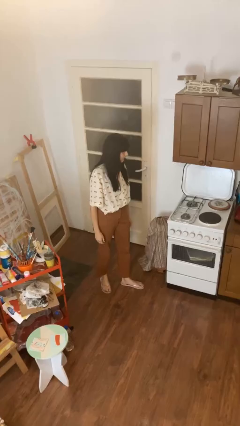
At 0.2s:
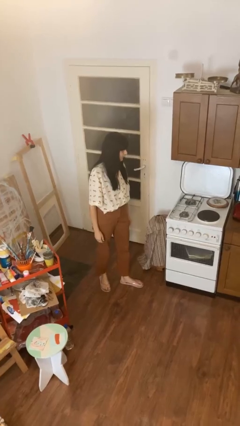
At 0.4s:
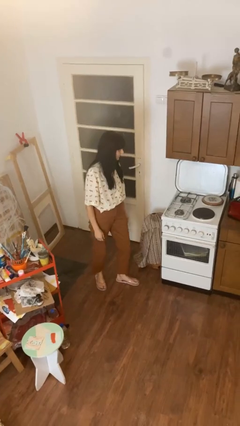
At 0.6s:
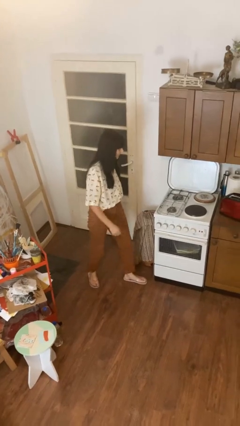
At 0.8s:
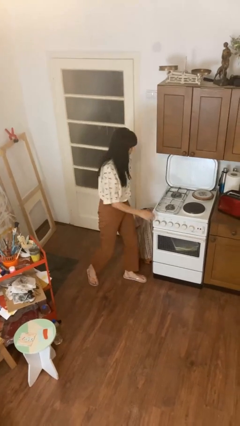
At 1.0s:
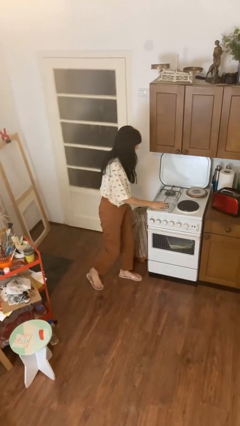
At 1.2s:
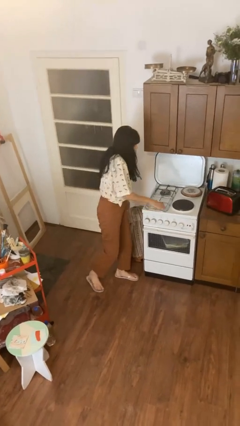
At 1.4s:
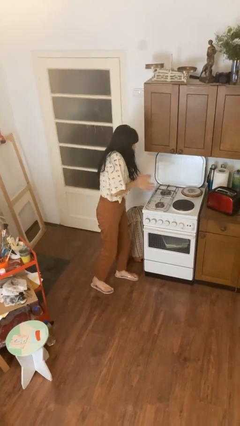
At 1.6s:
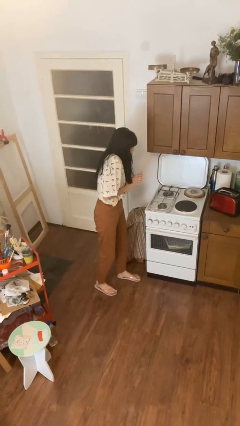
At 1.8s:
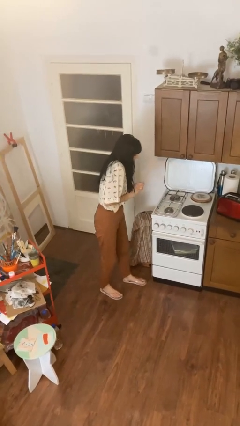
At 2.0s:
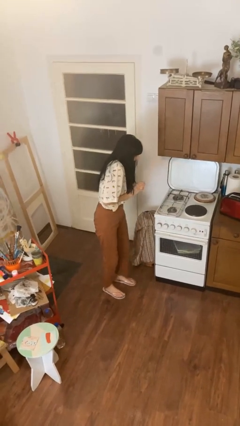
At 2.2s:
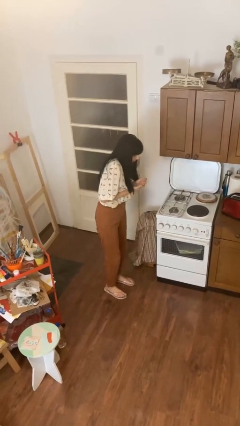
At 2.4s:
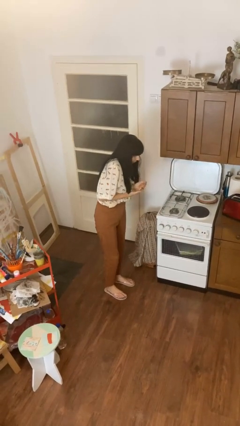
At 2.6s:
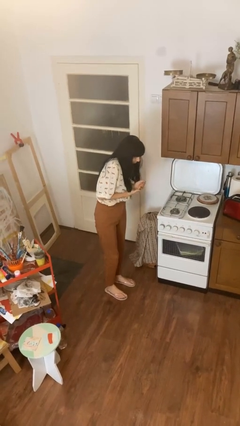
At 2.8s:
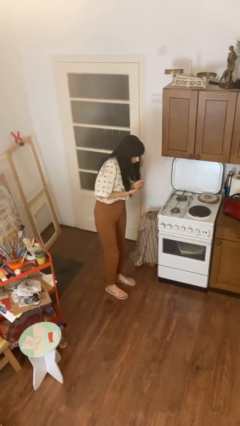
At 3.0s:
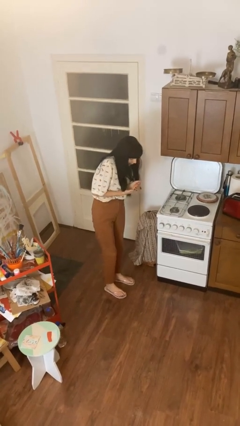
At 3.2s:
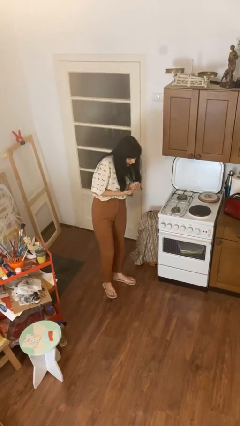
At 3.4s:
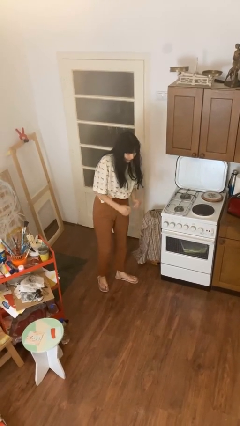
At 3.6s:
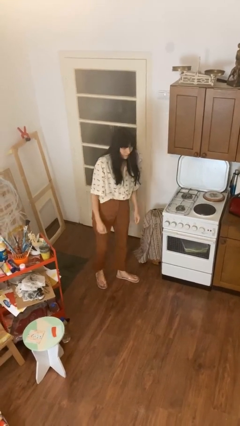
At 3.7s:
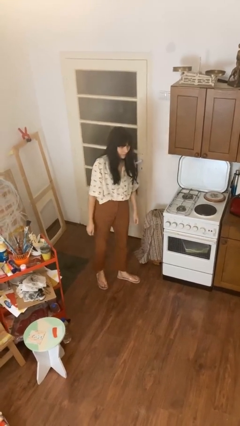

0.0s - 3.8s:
person burns hand

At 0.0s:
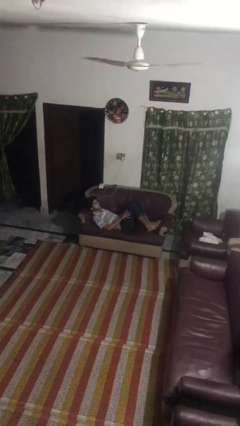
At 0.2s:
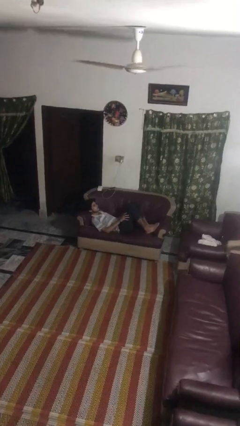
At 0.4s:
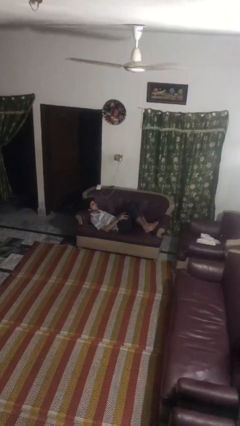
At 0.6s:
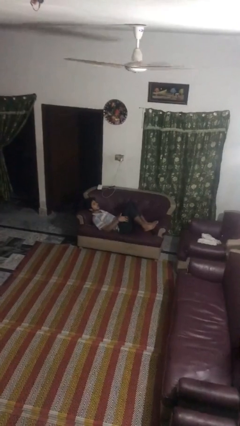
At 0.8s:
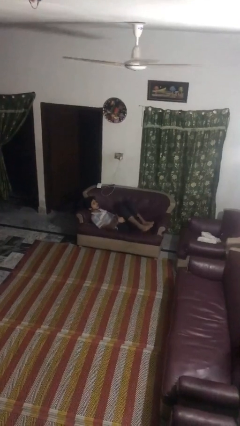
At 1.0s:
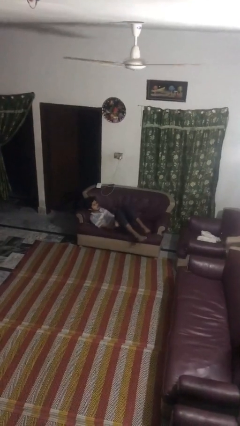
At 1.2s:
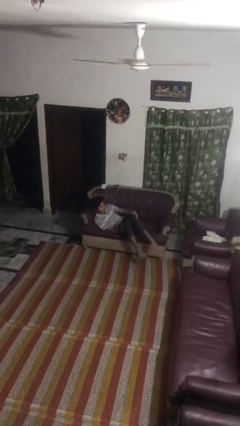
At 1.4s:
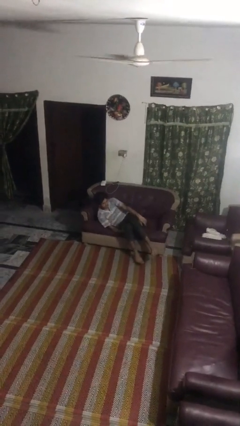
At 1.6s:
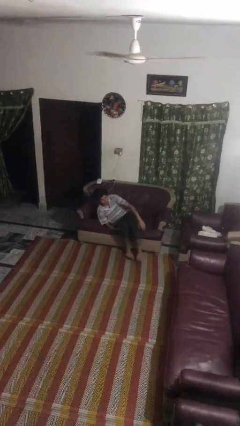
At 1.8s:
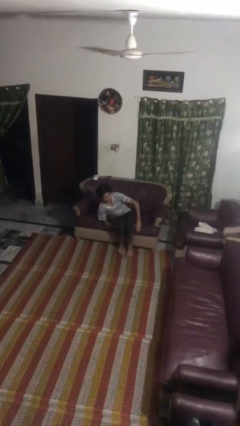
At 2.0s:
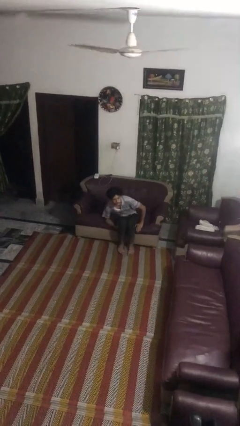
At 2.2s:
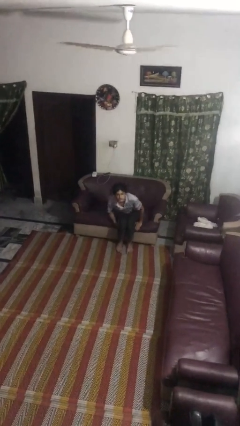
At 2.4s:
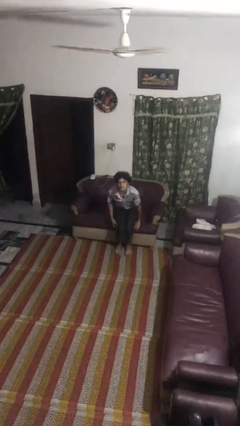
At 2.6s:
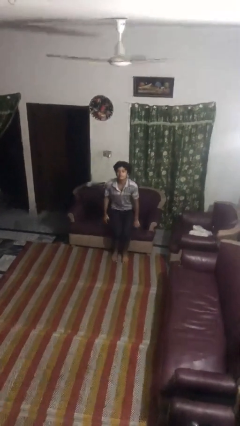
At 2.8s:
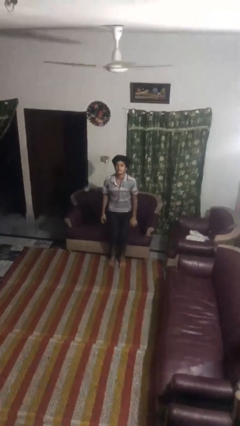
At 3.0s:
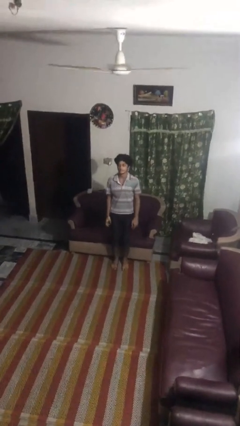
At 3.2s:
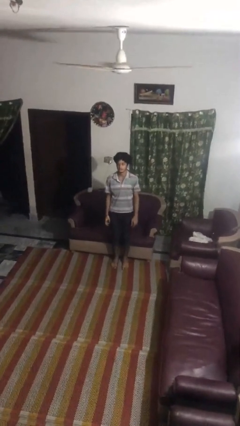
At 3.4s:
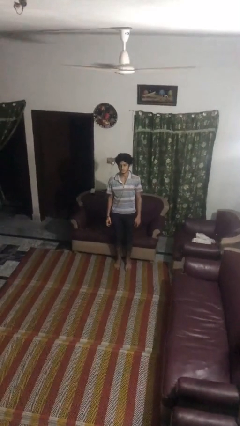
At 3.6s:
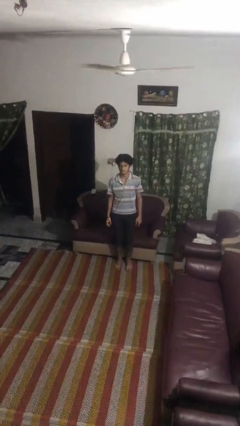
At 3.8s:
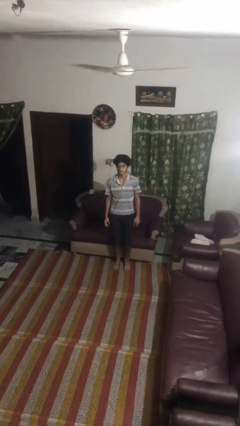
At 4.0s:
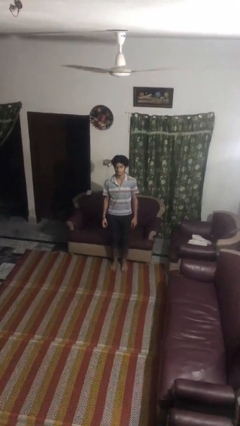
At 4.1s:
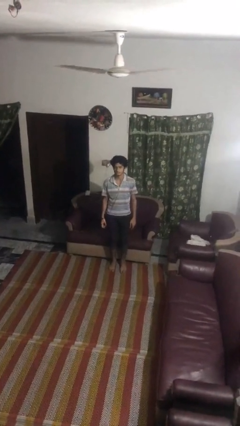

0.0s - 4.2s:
person stands up

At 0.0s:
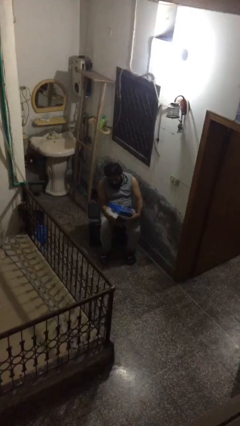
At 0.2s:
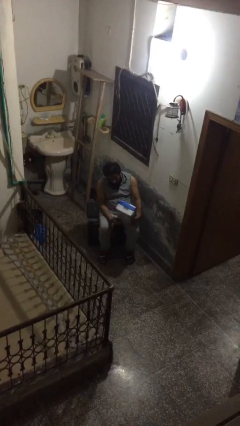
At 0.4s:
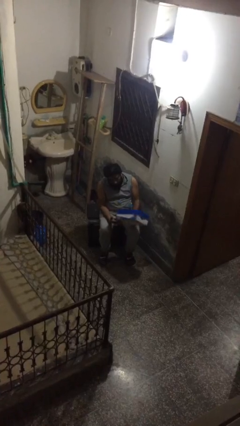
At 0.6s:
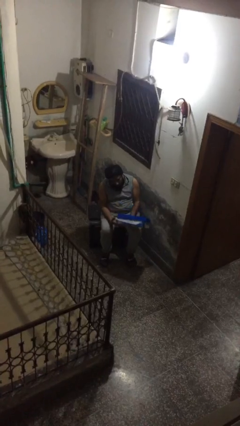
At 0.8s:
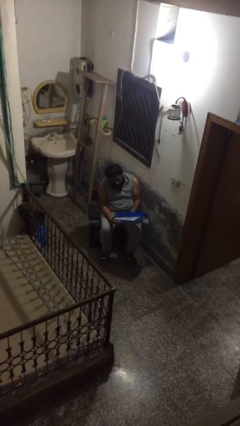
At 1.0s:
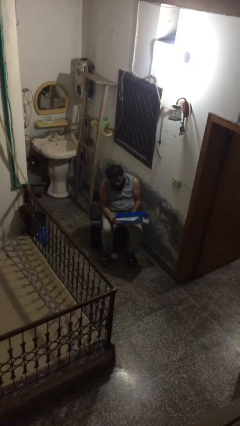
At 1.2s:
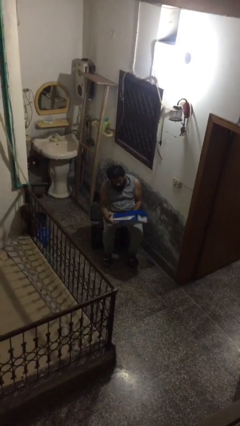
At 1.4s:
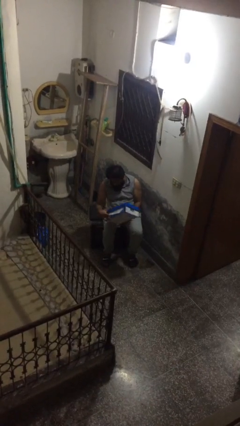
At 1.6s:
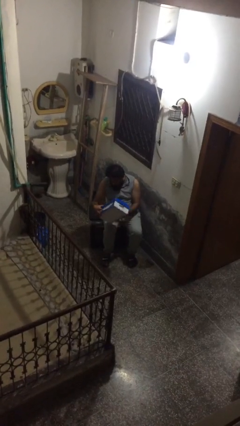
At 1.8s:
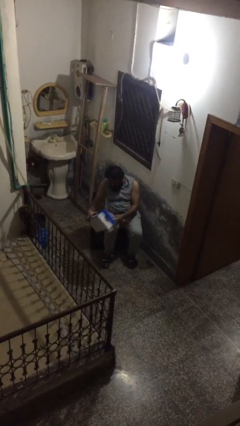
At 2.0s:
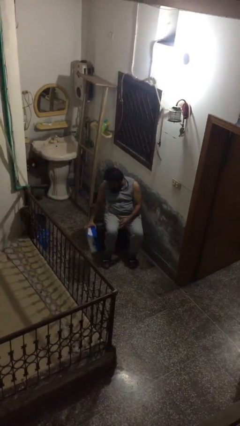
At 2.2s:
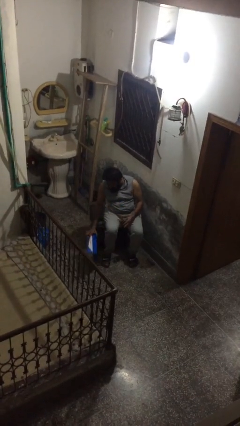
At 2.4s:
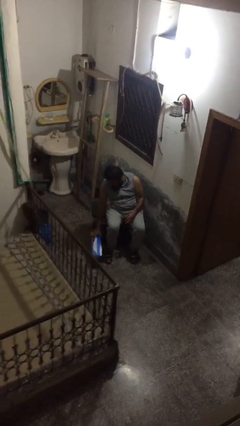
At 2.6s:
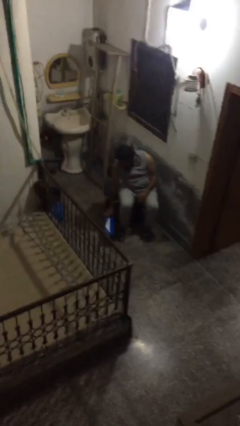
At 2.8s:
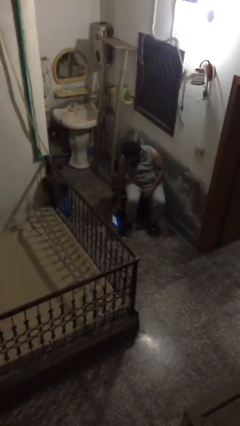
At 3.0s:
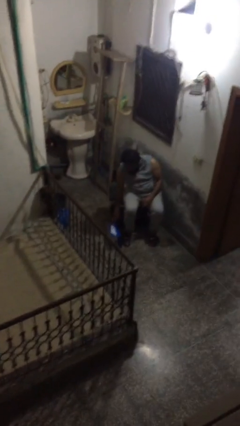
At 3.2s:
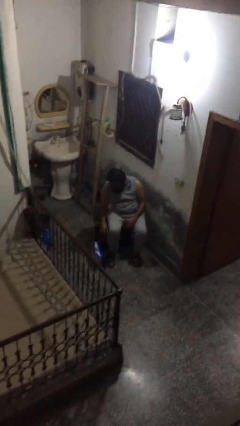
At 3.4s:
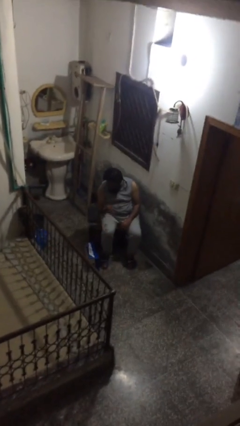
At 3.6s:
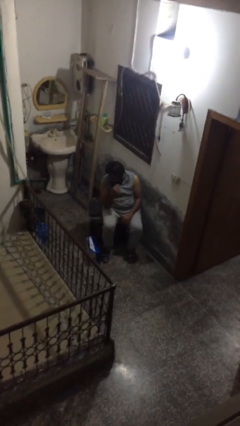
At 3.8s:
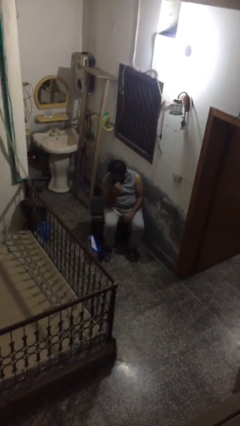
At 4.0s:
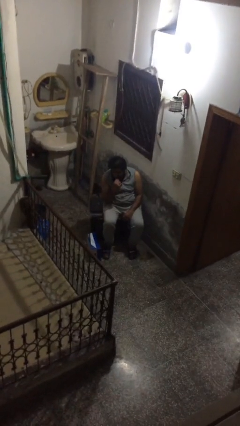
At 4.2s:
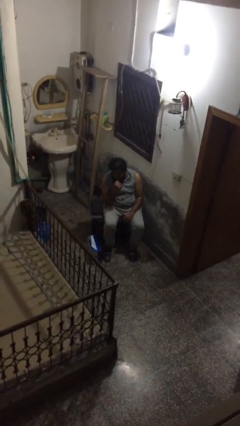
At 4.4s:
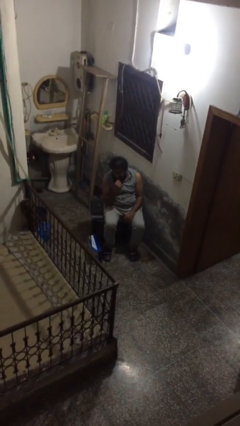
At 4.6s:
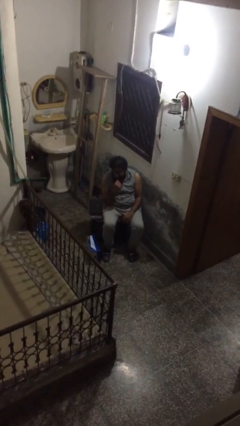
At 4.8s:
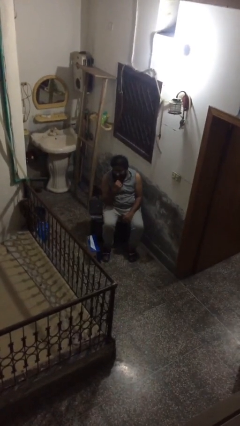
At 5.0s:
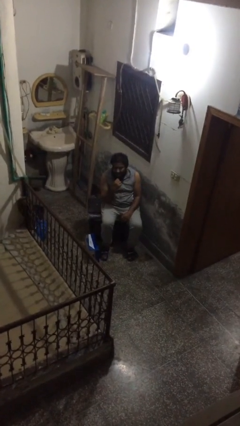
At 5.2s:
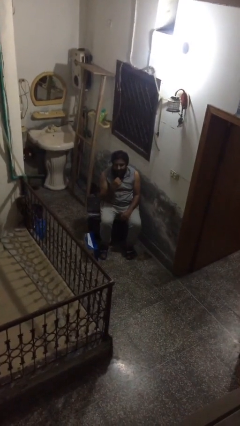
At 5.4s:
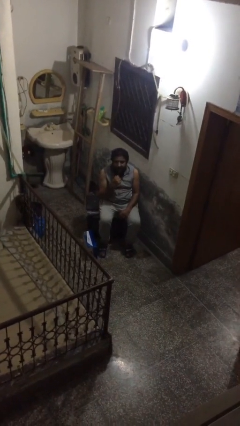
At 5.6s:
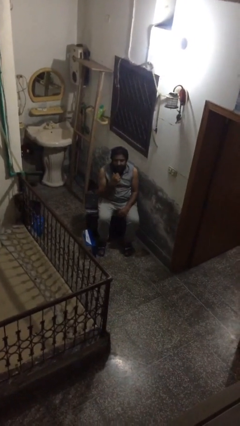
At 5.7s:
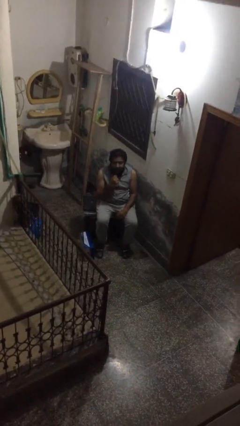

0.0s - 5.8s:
person puts down object on floor

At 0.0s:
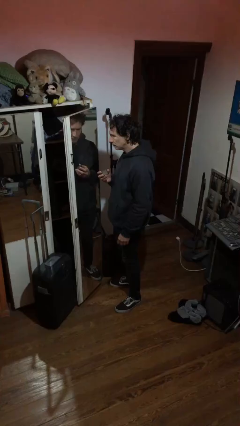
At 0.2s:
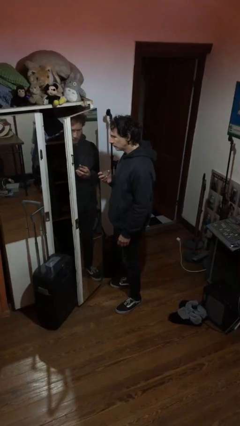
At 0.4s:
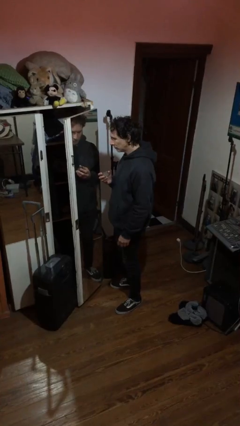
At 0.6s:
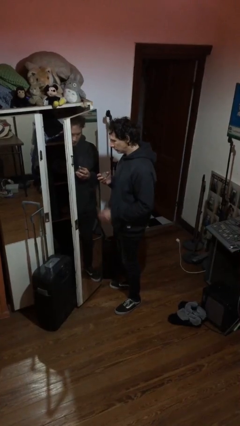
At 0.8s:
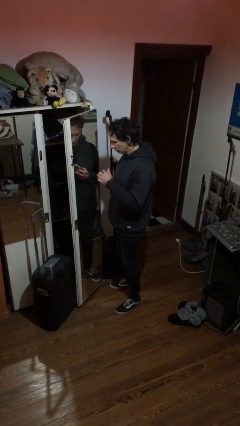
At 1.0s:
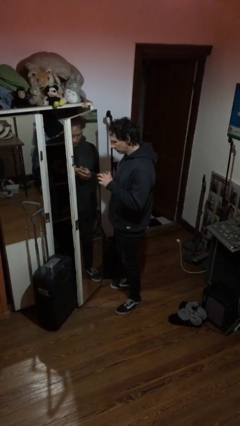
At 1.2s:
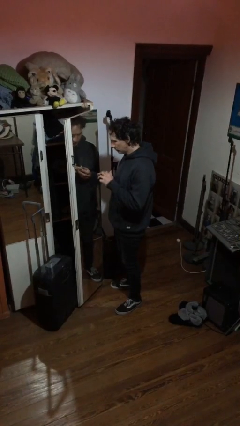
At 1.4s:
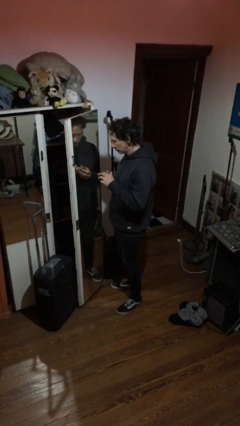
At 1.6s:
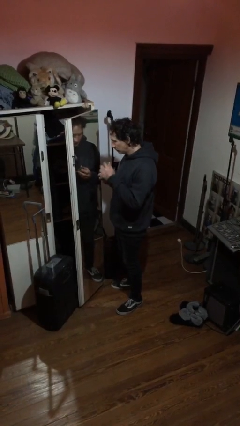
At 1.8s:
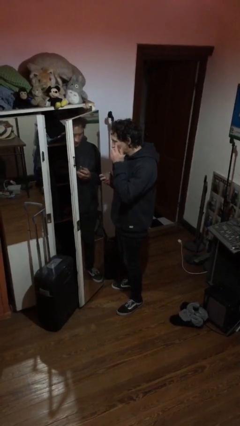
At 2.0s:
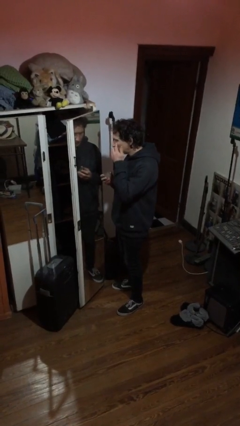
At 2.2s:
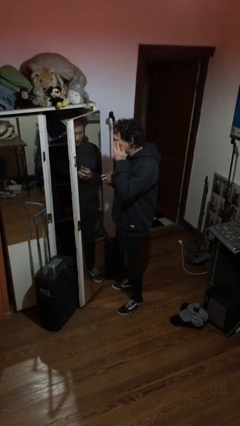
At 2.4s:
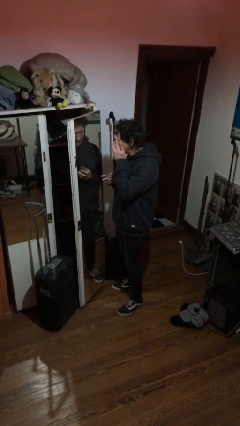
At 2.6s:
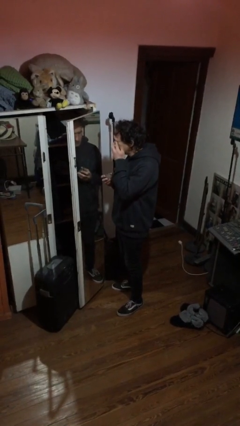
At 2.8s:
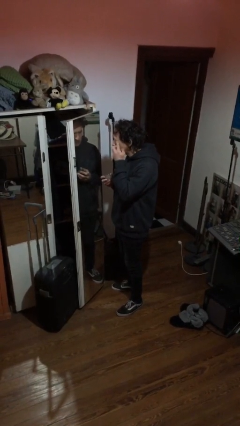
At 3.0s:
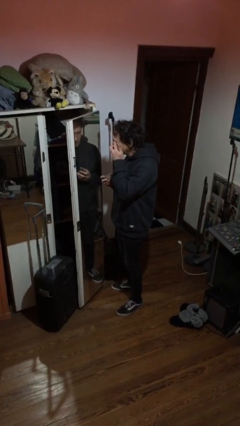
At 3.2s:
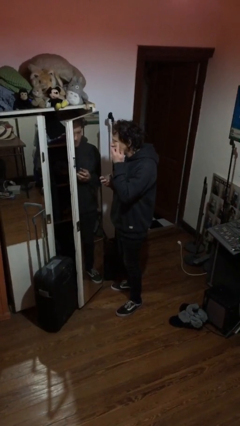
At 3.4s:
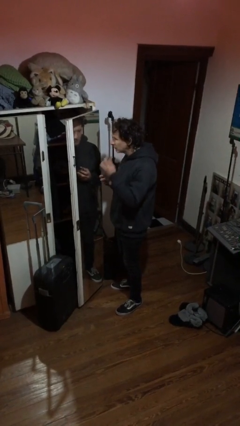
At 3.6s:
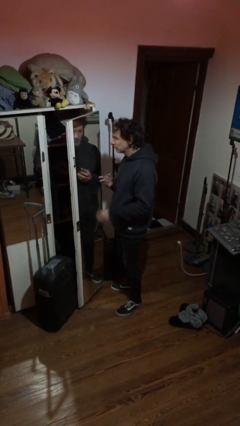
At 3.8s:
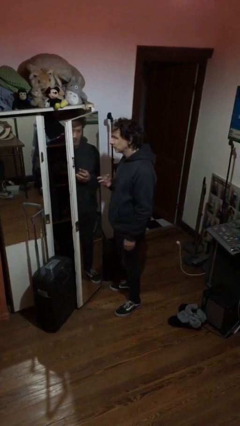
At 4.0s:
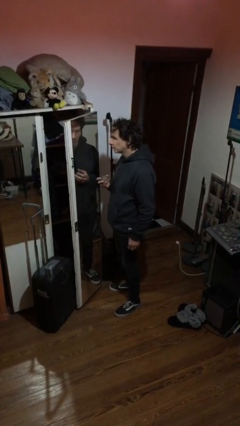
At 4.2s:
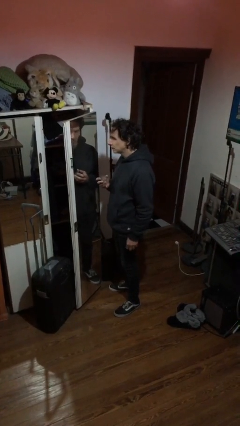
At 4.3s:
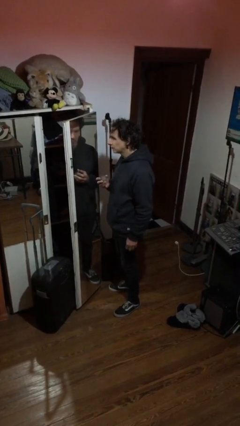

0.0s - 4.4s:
person applies eye makeup
